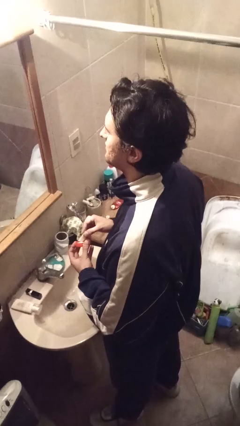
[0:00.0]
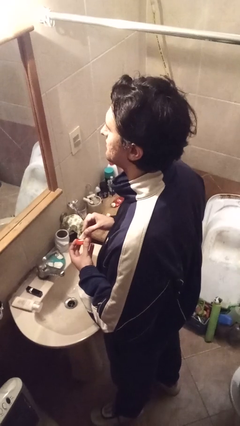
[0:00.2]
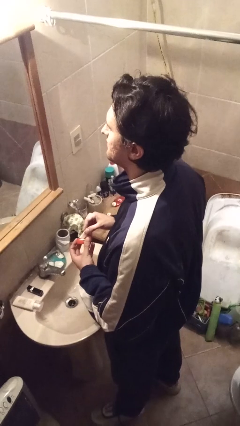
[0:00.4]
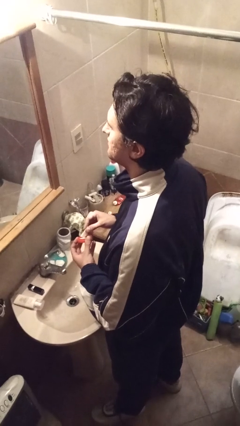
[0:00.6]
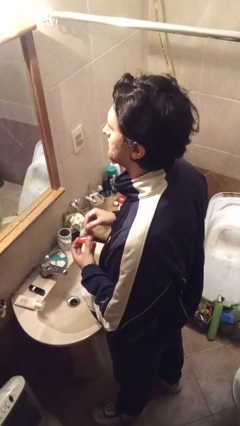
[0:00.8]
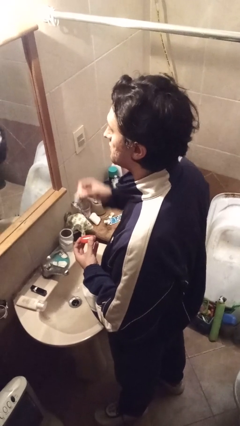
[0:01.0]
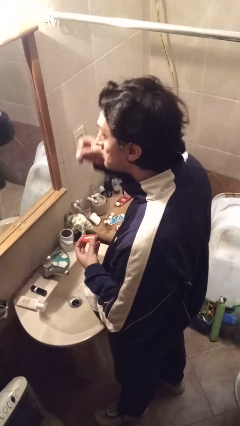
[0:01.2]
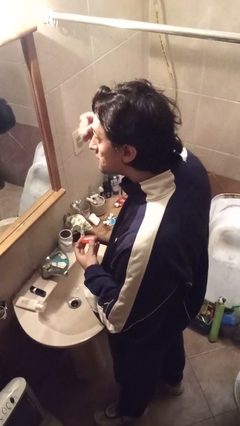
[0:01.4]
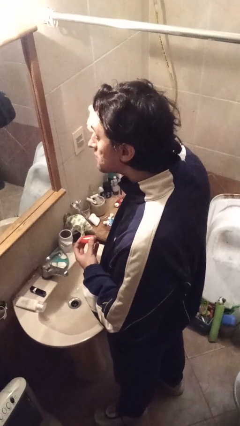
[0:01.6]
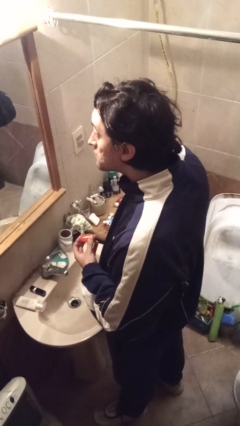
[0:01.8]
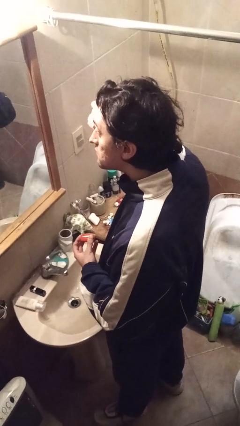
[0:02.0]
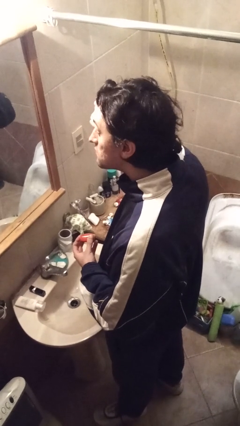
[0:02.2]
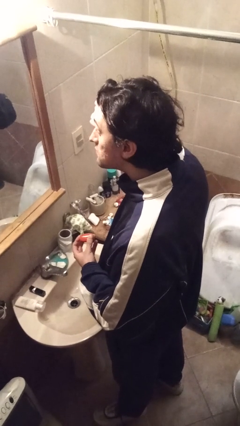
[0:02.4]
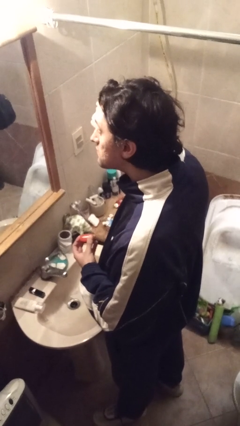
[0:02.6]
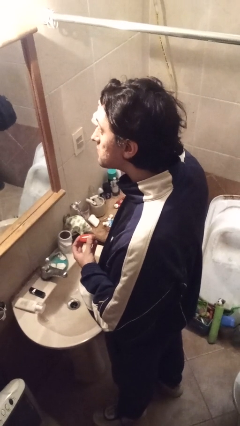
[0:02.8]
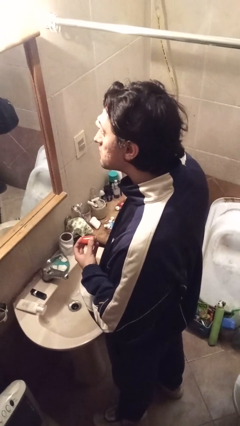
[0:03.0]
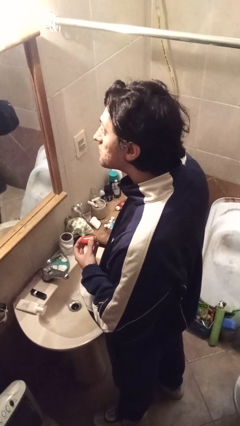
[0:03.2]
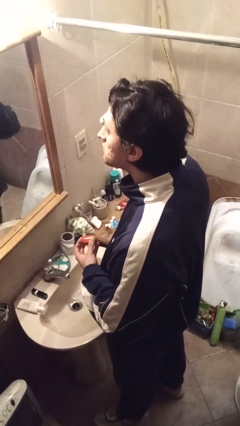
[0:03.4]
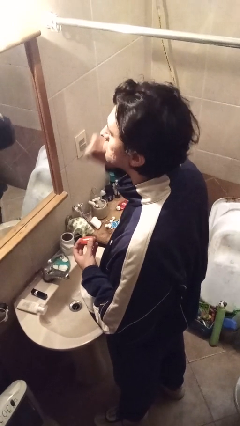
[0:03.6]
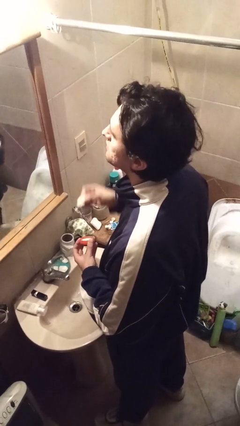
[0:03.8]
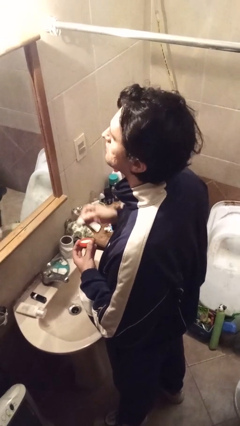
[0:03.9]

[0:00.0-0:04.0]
person applies eye makeup

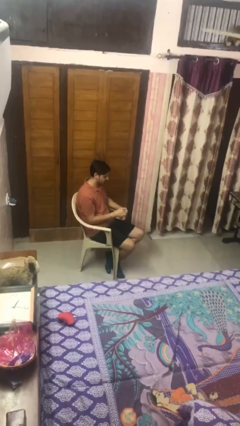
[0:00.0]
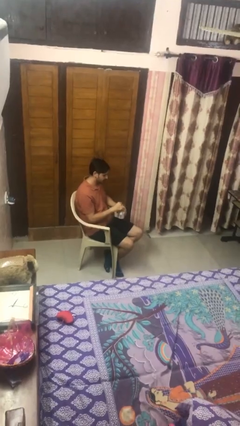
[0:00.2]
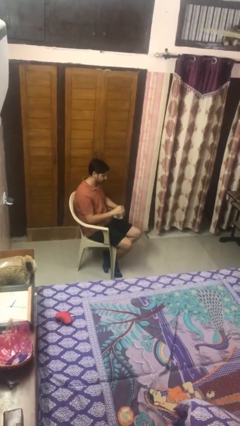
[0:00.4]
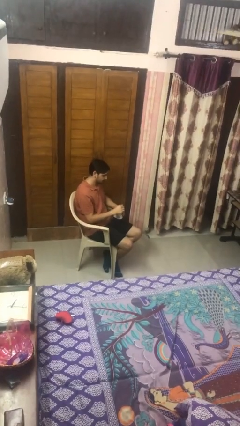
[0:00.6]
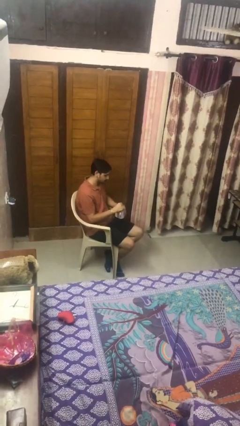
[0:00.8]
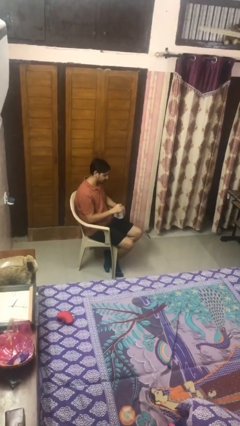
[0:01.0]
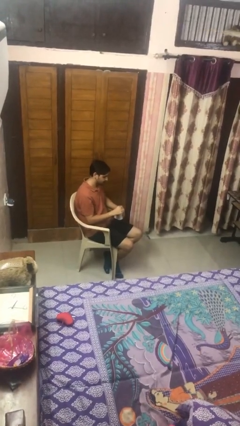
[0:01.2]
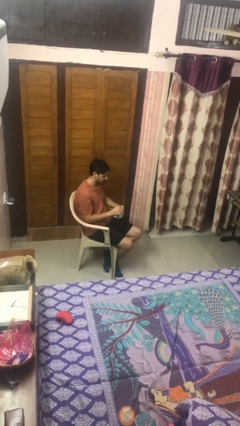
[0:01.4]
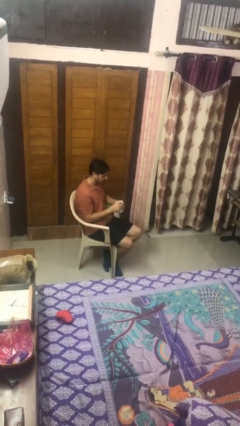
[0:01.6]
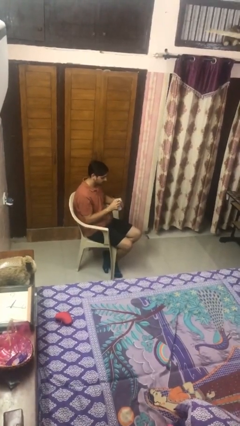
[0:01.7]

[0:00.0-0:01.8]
person stirs mug

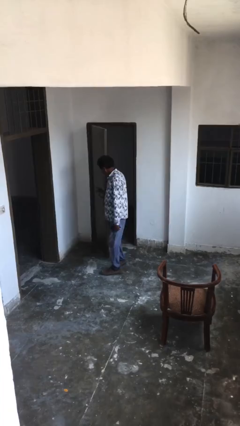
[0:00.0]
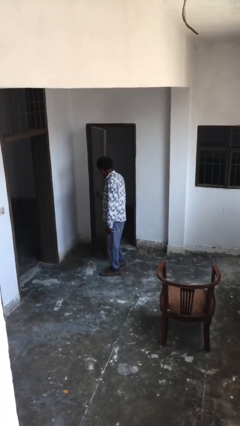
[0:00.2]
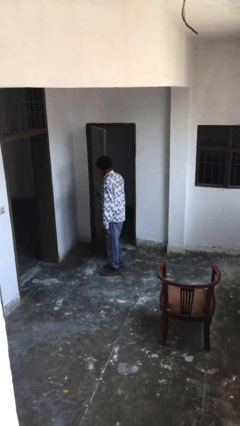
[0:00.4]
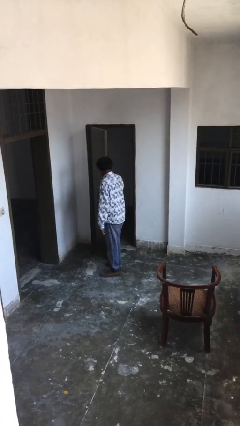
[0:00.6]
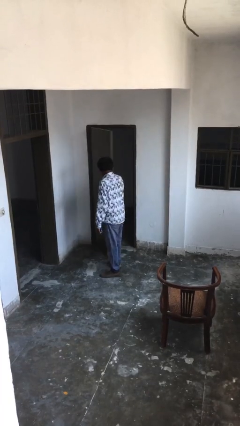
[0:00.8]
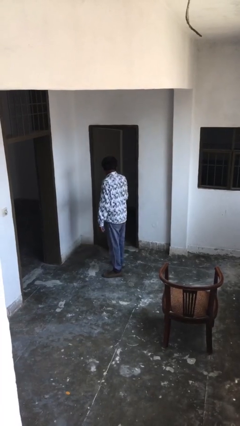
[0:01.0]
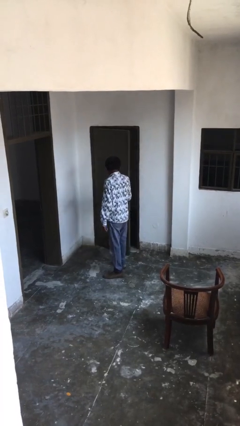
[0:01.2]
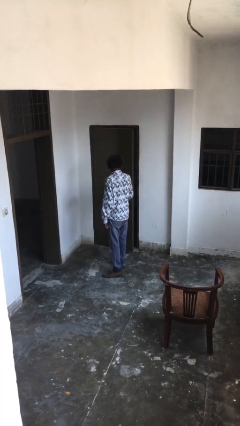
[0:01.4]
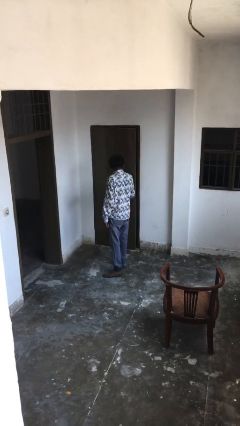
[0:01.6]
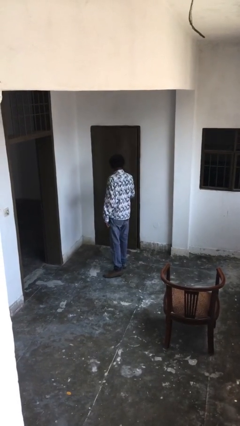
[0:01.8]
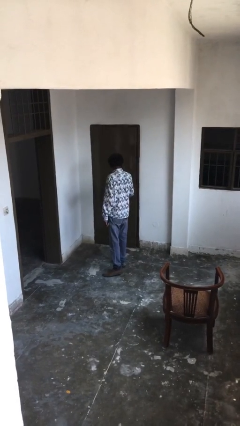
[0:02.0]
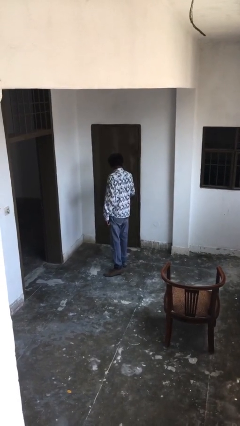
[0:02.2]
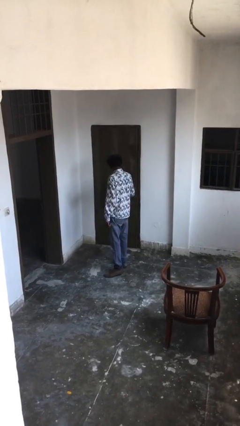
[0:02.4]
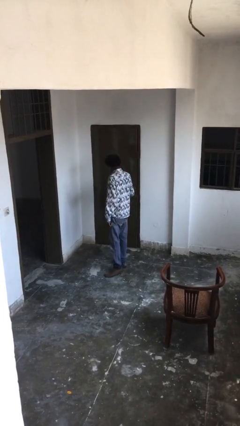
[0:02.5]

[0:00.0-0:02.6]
person closes facility door

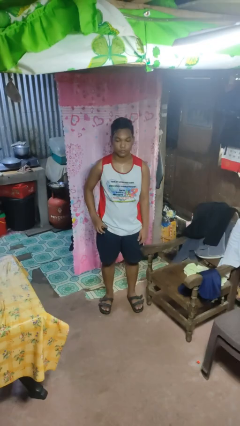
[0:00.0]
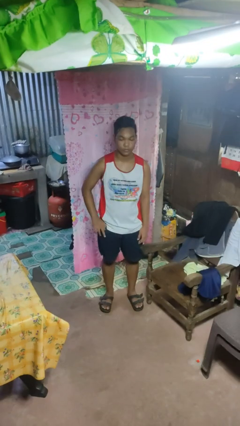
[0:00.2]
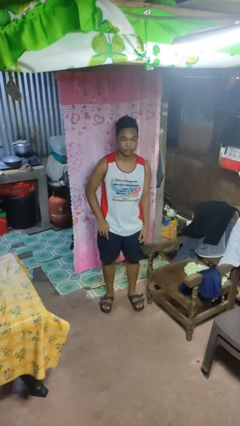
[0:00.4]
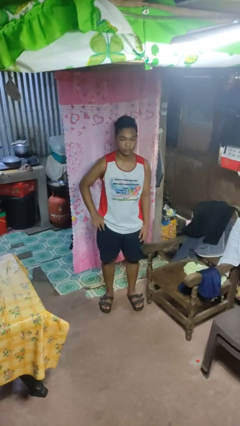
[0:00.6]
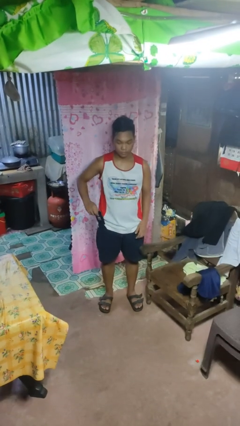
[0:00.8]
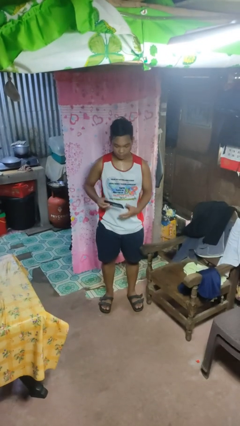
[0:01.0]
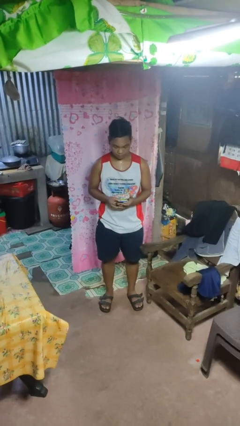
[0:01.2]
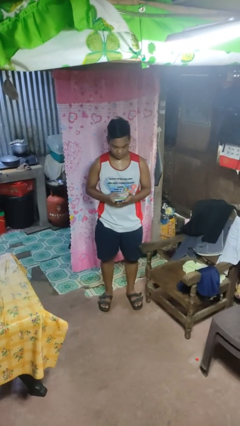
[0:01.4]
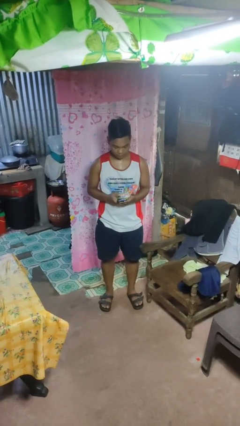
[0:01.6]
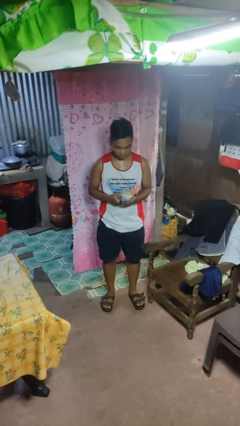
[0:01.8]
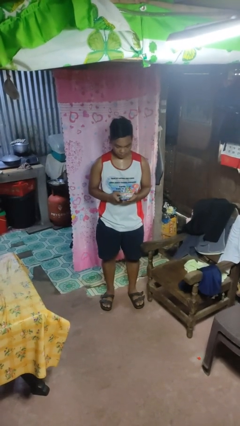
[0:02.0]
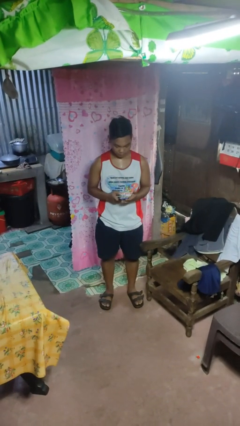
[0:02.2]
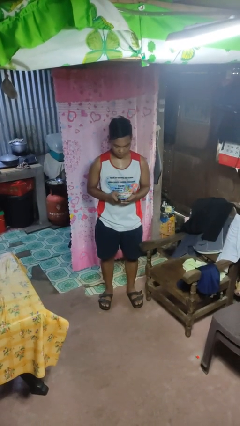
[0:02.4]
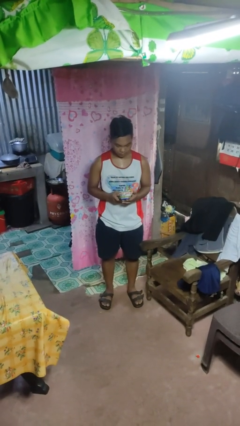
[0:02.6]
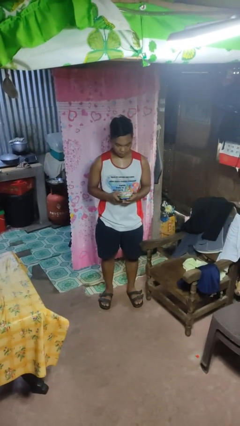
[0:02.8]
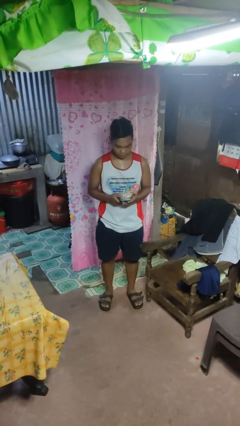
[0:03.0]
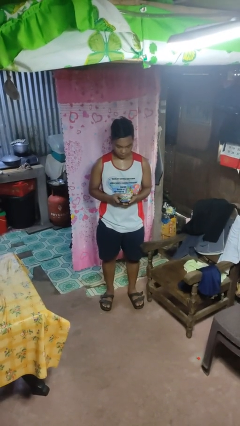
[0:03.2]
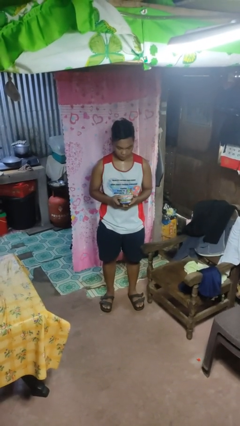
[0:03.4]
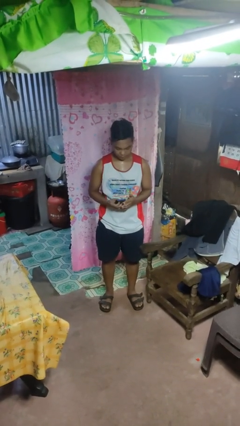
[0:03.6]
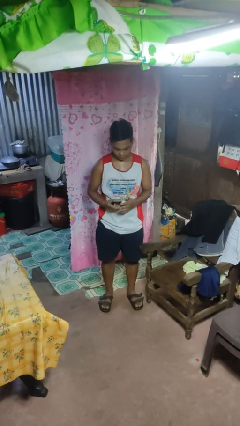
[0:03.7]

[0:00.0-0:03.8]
person takes phone from pocket

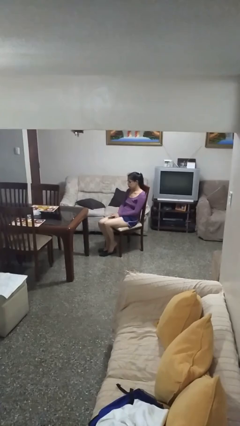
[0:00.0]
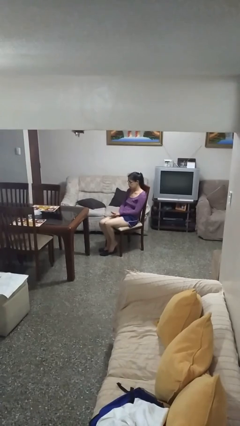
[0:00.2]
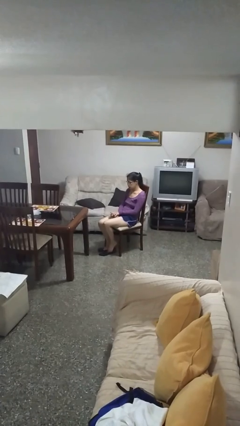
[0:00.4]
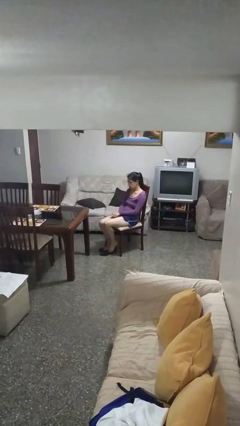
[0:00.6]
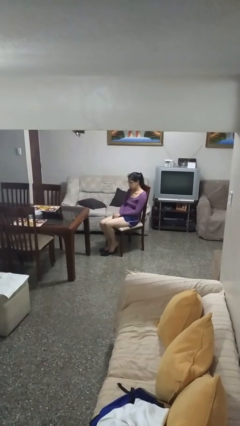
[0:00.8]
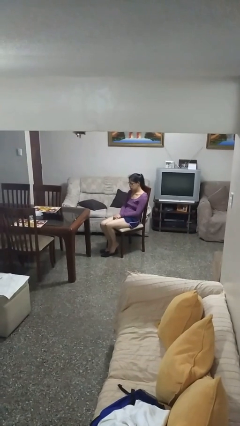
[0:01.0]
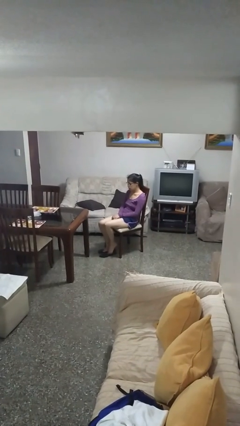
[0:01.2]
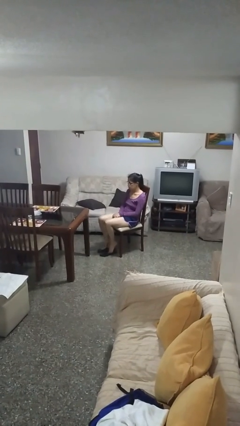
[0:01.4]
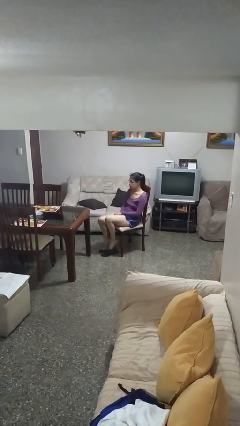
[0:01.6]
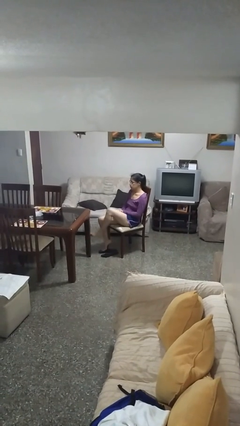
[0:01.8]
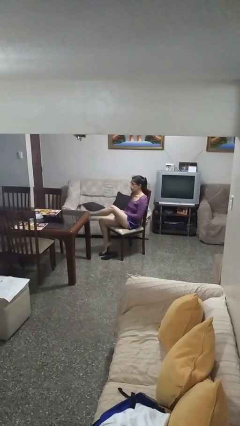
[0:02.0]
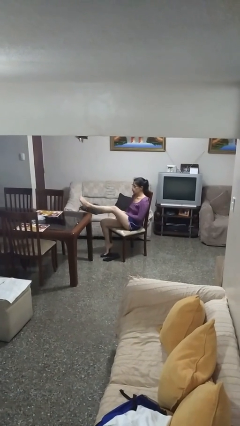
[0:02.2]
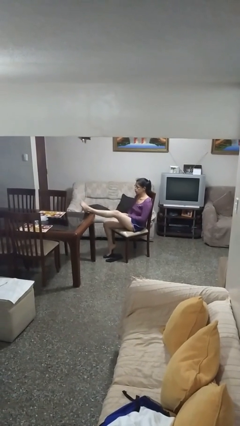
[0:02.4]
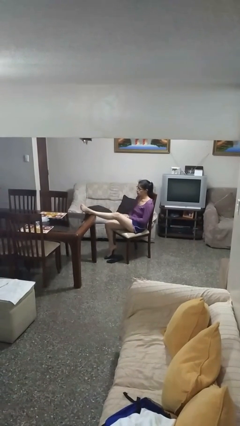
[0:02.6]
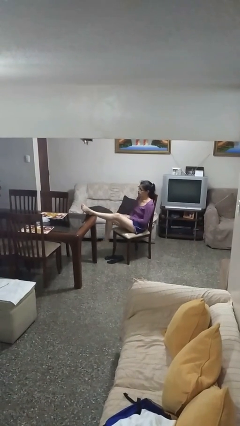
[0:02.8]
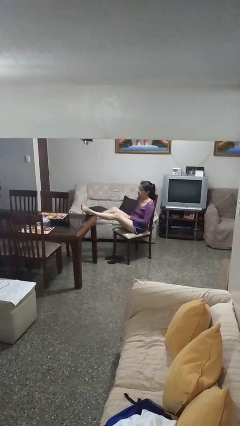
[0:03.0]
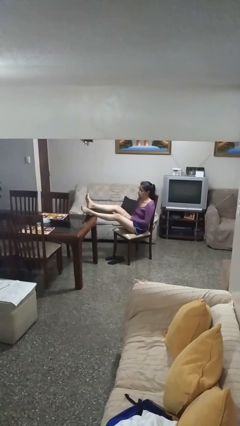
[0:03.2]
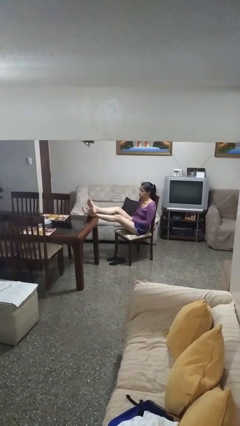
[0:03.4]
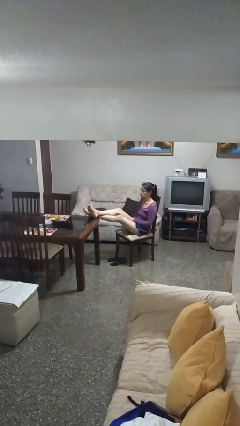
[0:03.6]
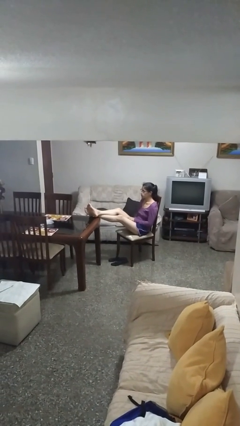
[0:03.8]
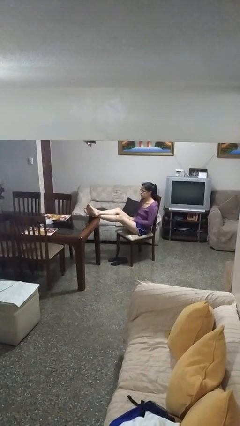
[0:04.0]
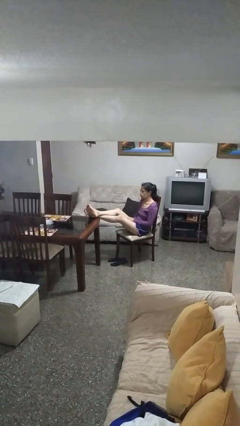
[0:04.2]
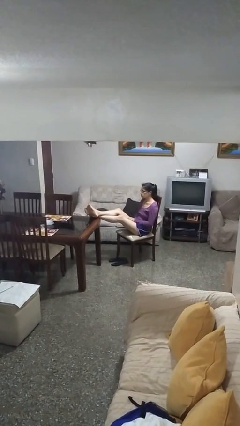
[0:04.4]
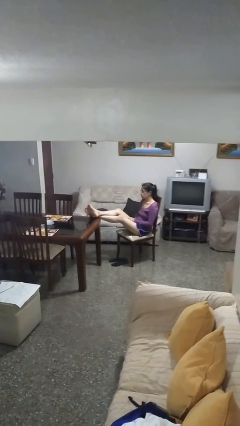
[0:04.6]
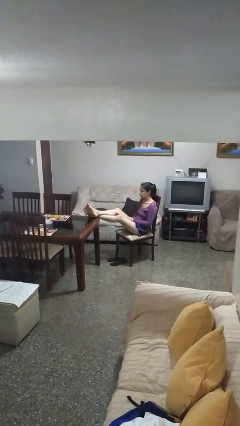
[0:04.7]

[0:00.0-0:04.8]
person puts feet up

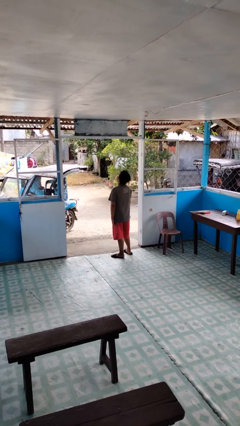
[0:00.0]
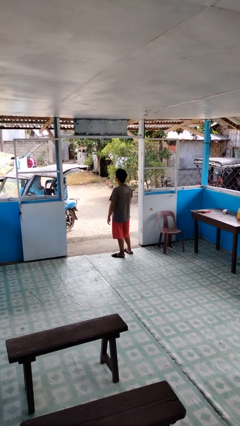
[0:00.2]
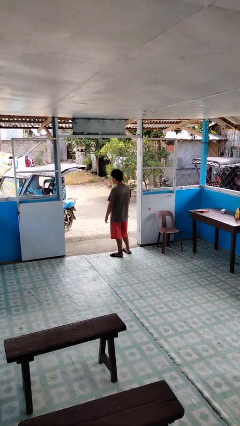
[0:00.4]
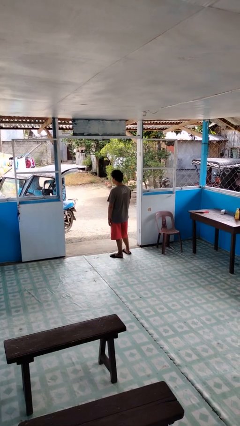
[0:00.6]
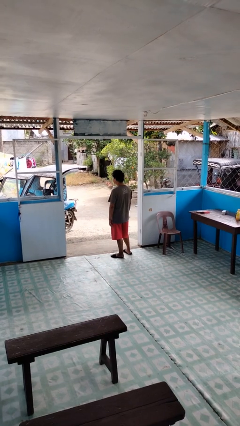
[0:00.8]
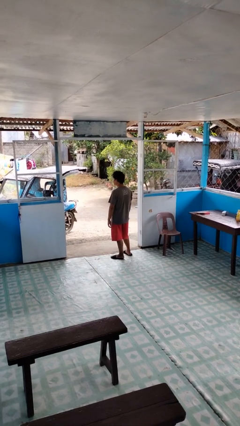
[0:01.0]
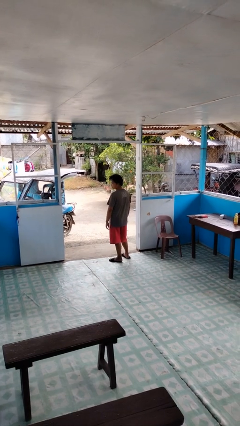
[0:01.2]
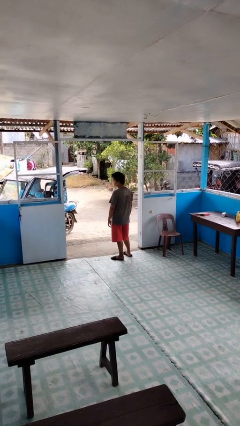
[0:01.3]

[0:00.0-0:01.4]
person shakes head
